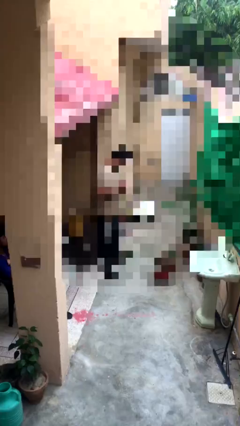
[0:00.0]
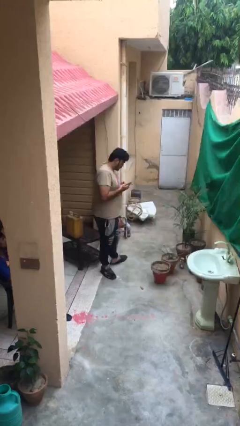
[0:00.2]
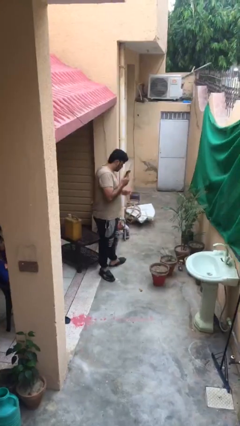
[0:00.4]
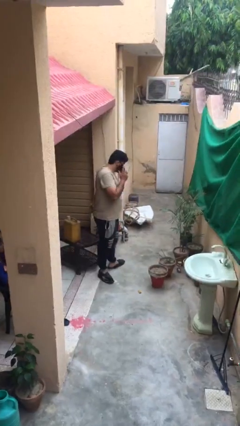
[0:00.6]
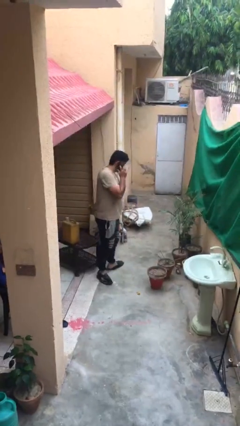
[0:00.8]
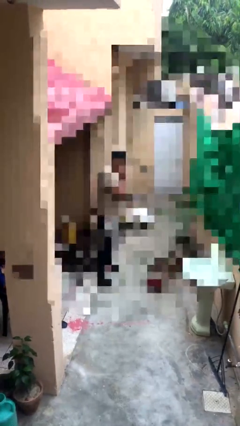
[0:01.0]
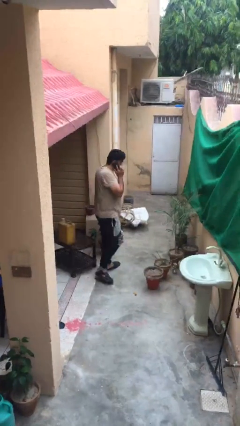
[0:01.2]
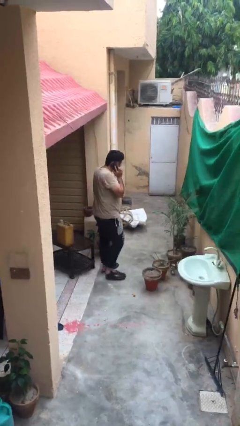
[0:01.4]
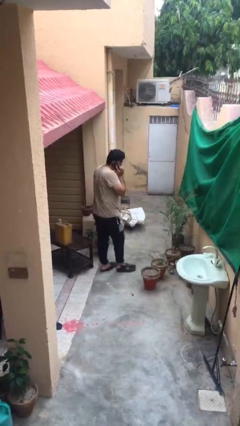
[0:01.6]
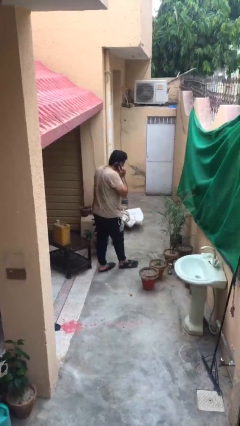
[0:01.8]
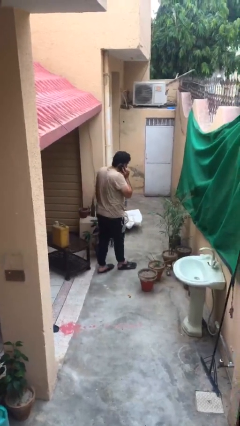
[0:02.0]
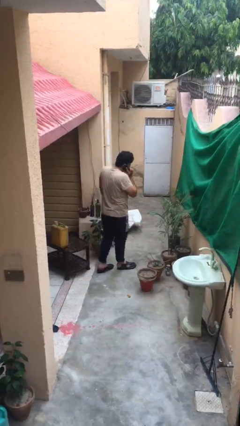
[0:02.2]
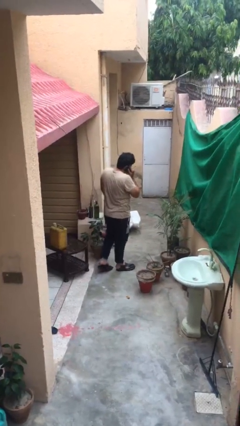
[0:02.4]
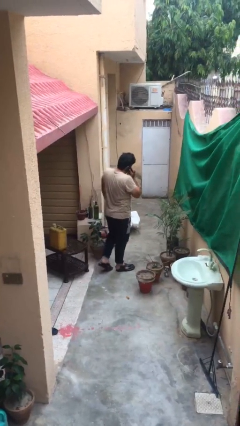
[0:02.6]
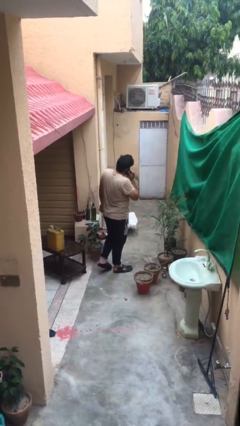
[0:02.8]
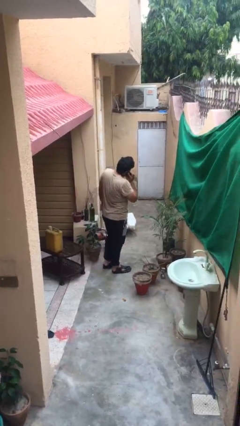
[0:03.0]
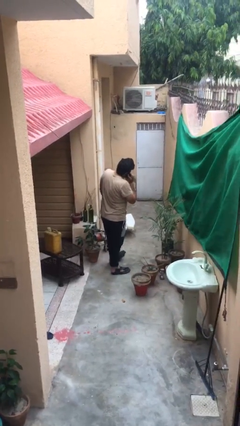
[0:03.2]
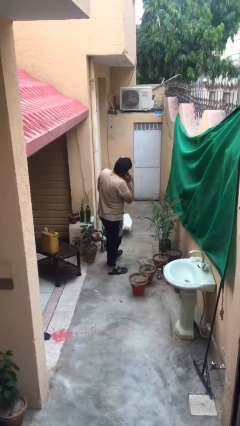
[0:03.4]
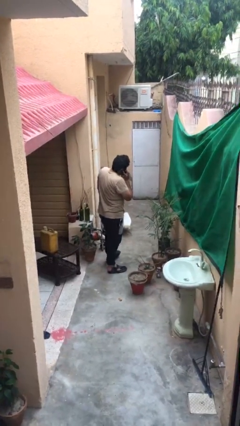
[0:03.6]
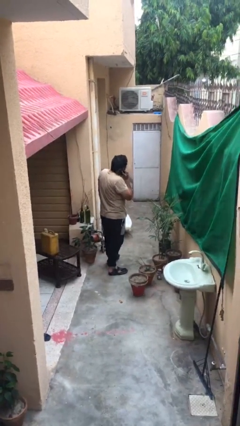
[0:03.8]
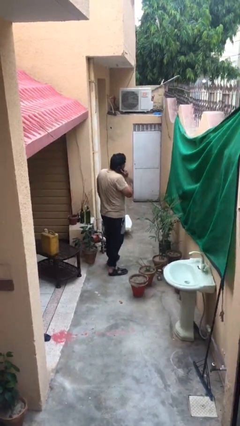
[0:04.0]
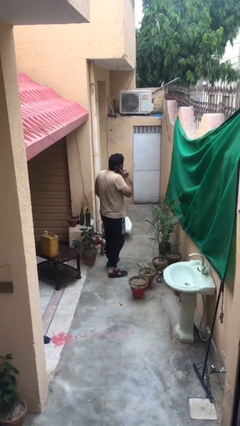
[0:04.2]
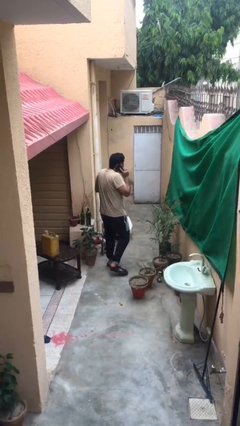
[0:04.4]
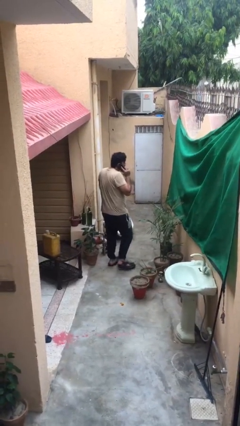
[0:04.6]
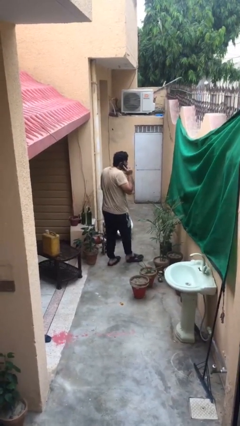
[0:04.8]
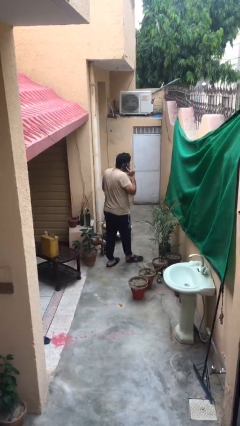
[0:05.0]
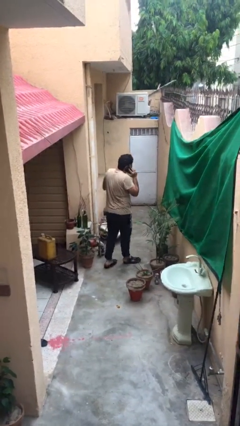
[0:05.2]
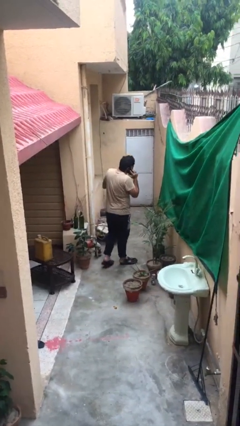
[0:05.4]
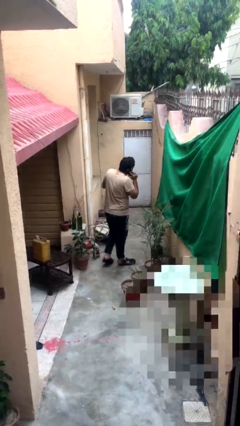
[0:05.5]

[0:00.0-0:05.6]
person talks on phone

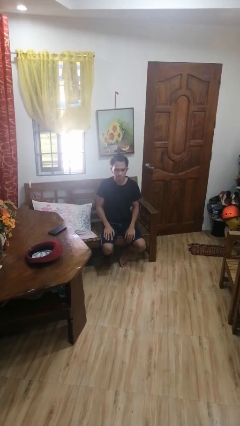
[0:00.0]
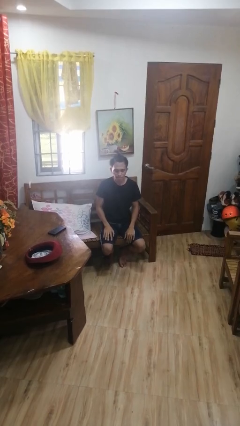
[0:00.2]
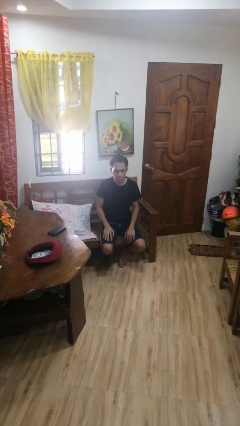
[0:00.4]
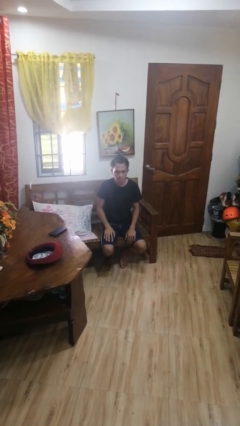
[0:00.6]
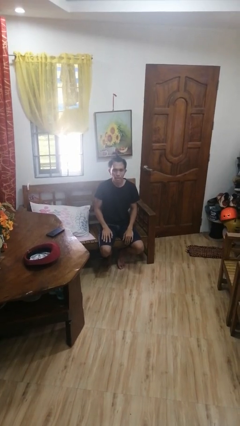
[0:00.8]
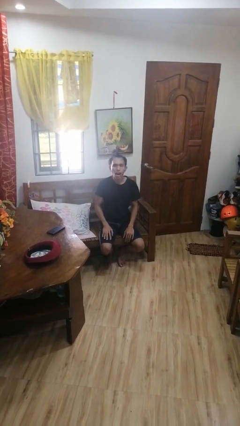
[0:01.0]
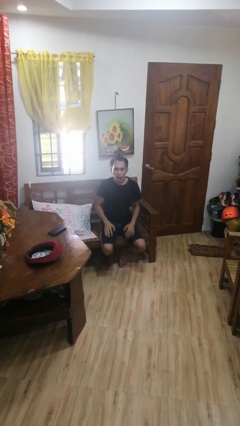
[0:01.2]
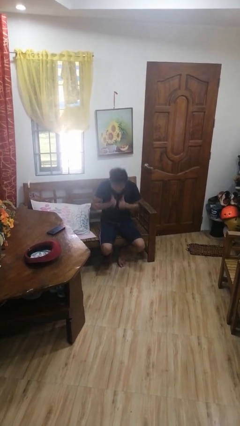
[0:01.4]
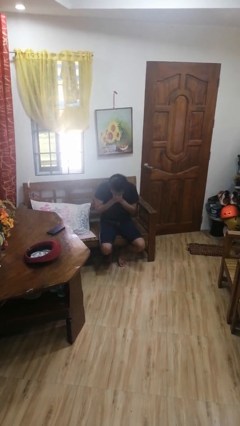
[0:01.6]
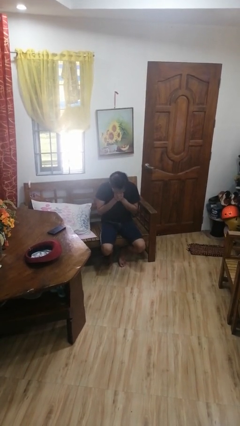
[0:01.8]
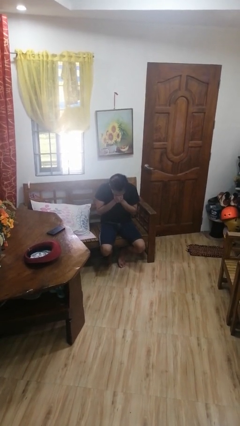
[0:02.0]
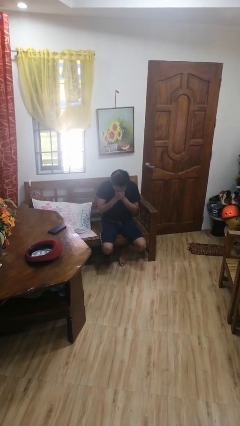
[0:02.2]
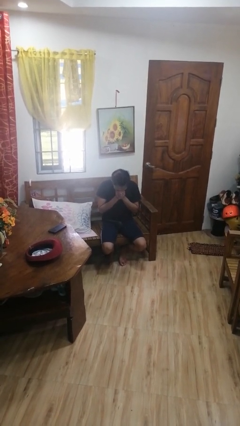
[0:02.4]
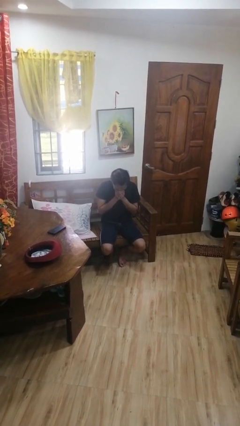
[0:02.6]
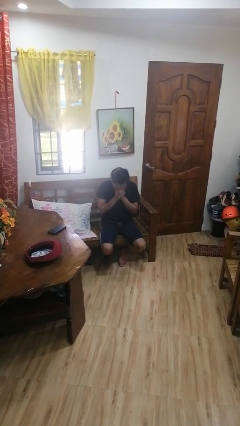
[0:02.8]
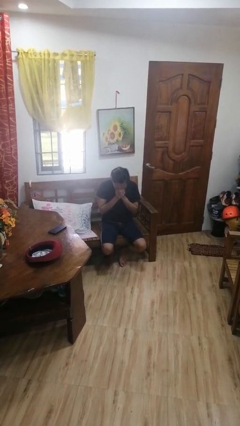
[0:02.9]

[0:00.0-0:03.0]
person sneezes into hand

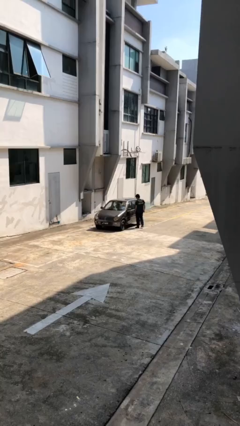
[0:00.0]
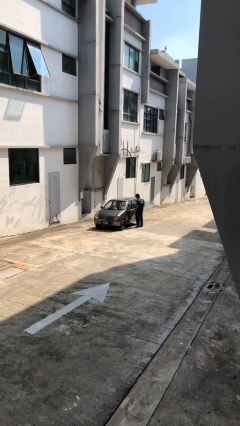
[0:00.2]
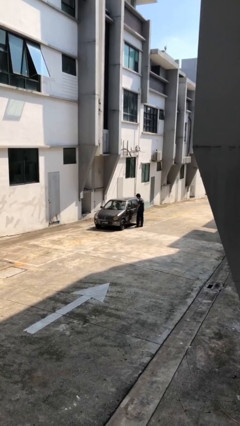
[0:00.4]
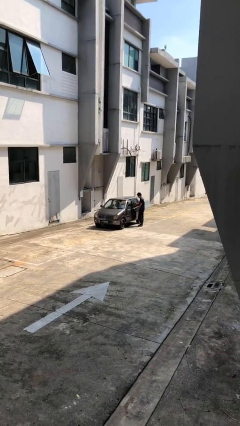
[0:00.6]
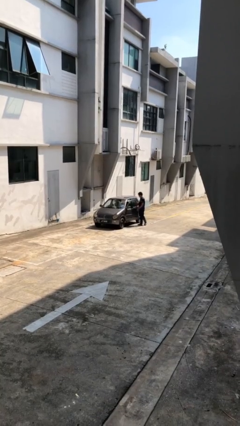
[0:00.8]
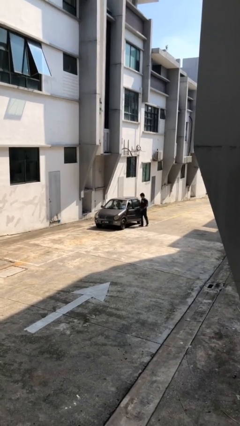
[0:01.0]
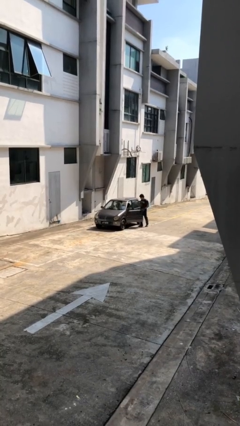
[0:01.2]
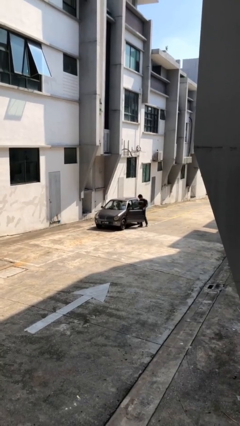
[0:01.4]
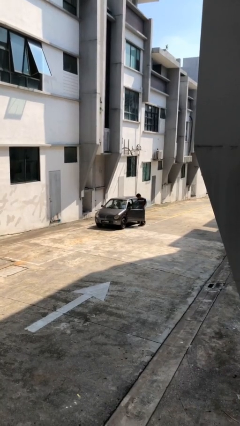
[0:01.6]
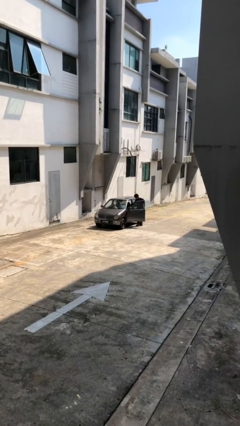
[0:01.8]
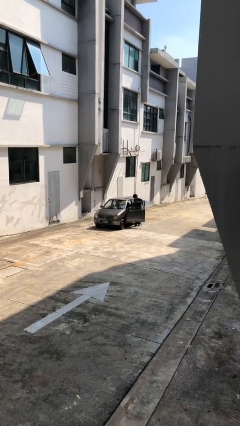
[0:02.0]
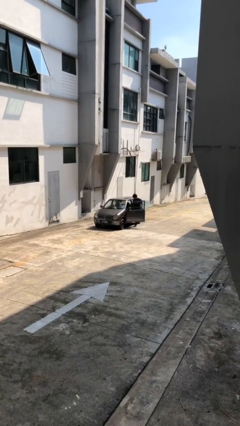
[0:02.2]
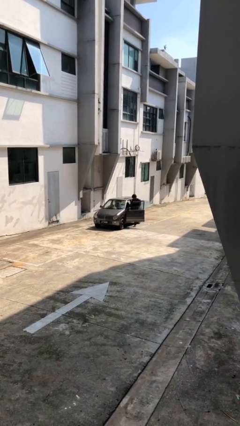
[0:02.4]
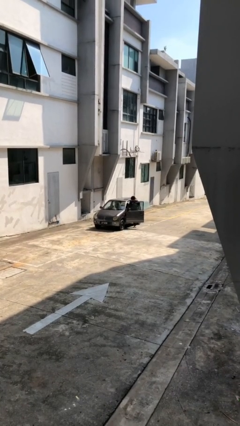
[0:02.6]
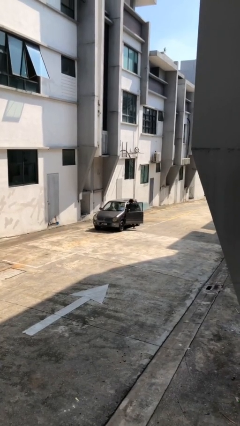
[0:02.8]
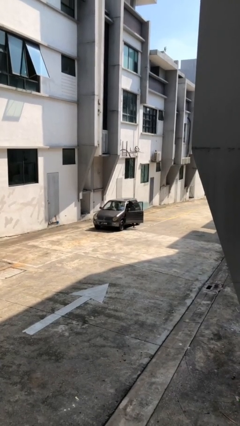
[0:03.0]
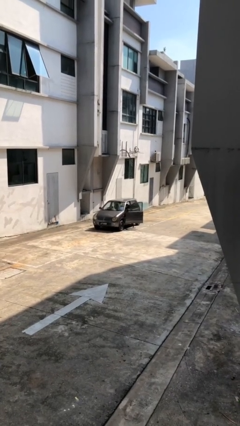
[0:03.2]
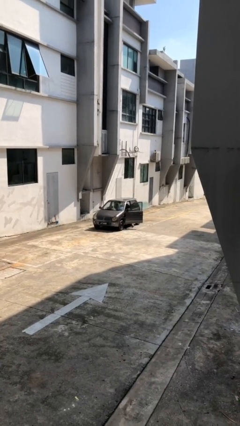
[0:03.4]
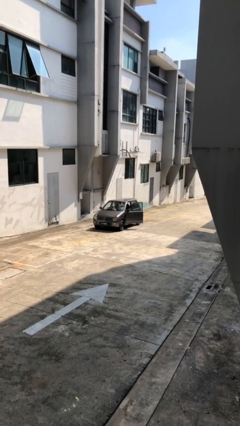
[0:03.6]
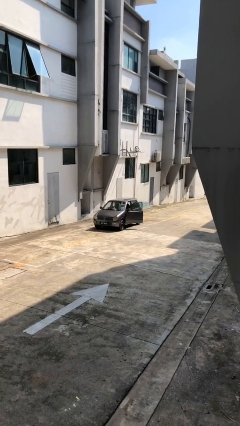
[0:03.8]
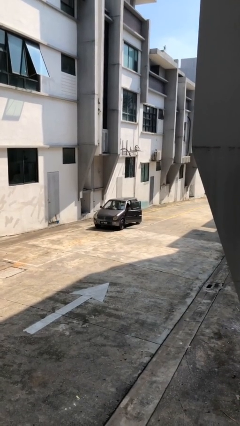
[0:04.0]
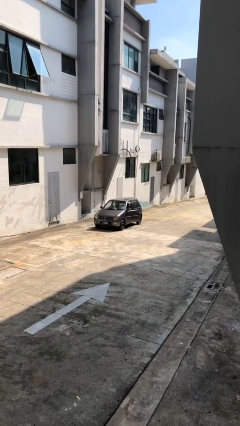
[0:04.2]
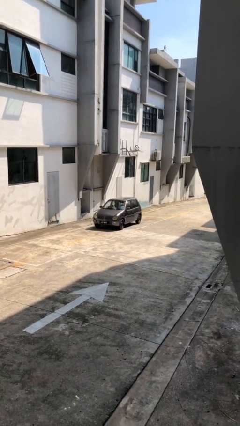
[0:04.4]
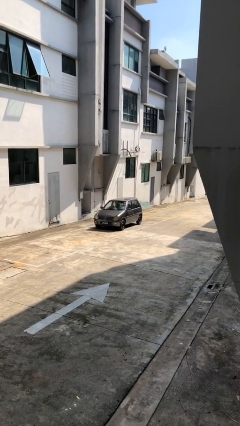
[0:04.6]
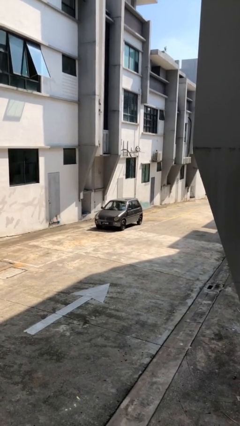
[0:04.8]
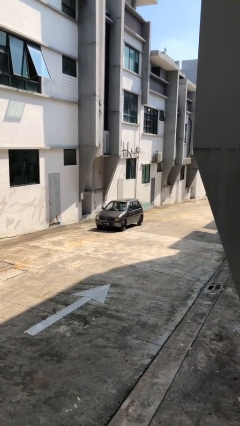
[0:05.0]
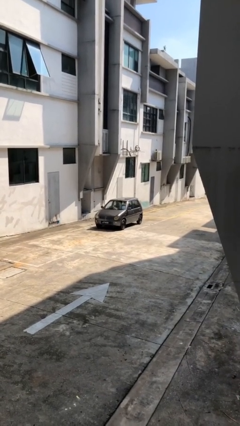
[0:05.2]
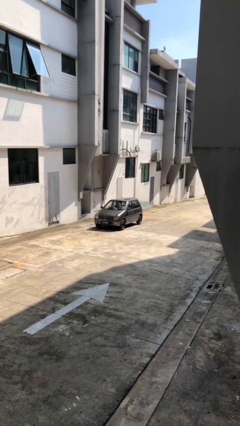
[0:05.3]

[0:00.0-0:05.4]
car picks up person

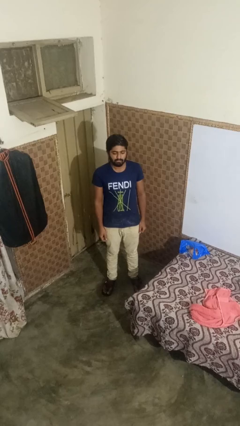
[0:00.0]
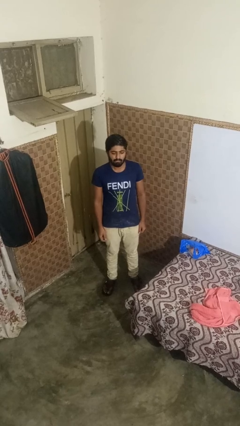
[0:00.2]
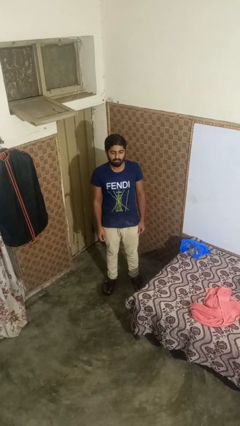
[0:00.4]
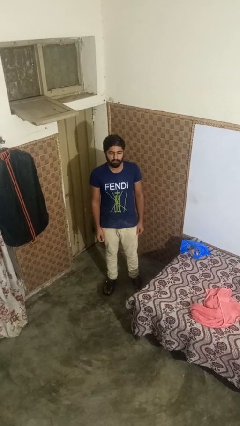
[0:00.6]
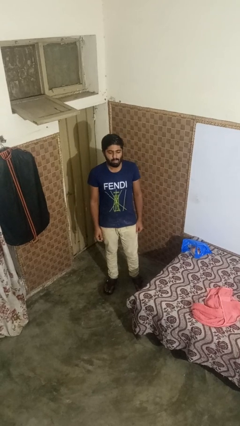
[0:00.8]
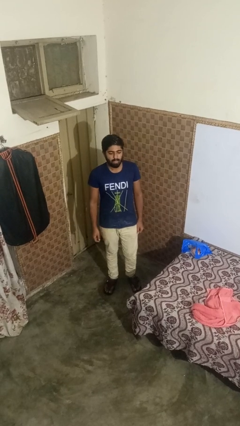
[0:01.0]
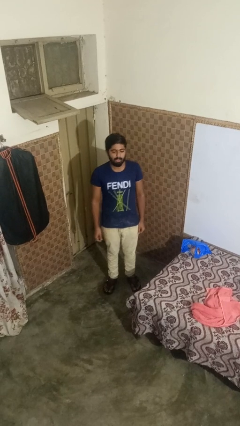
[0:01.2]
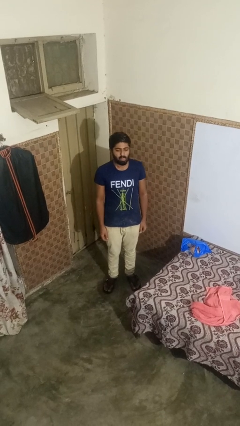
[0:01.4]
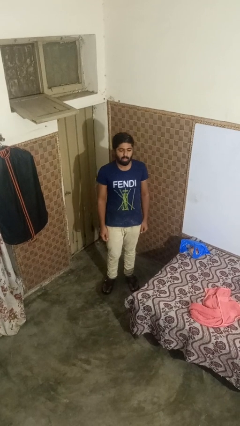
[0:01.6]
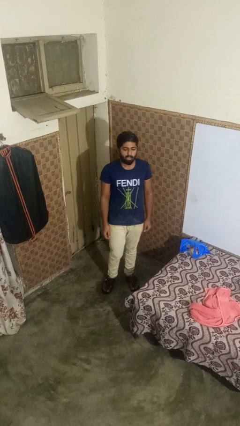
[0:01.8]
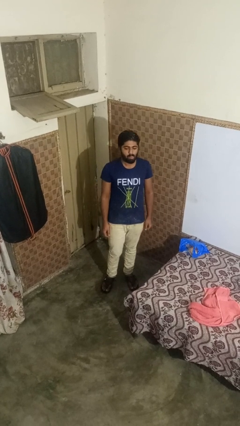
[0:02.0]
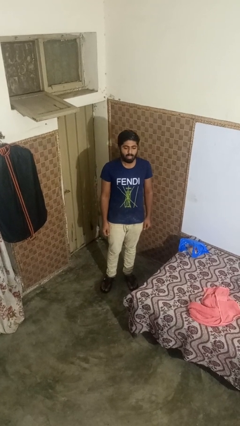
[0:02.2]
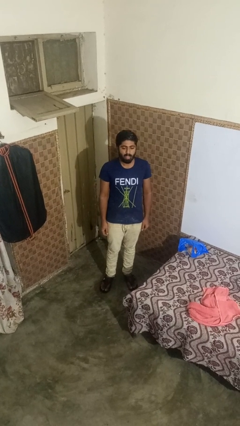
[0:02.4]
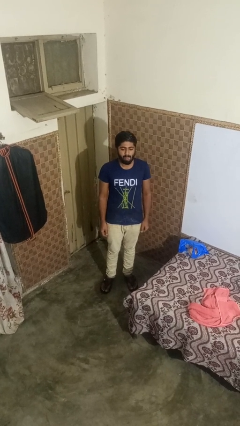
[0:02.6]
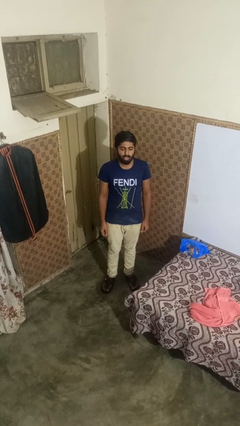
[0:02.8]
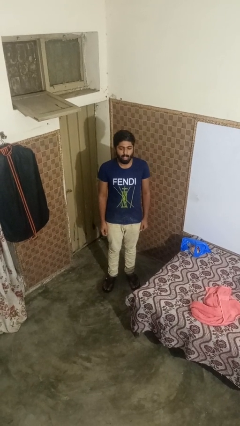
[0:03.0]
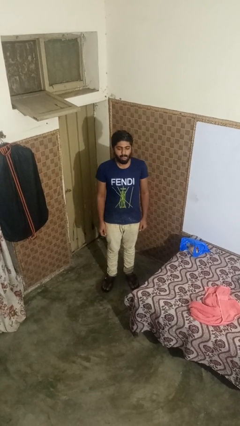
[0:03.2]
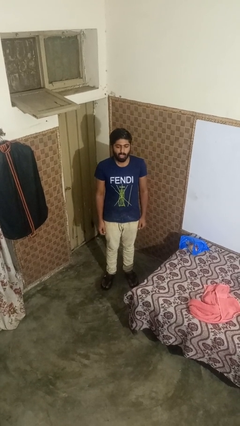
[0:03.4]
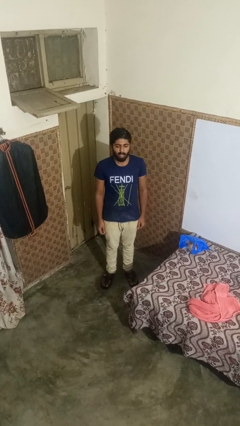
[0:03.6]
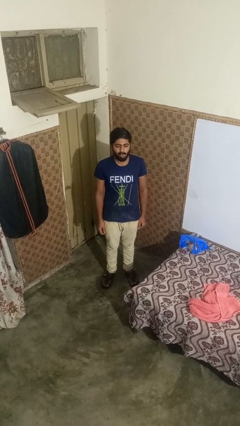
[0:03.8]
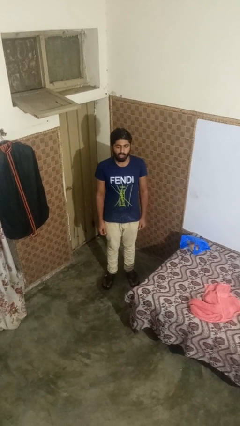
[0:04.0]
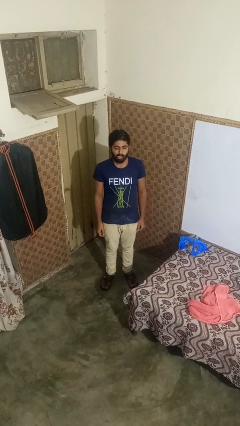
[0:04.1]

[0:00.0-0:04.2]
person sticks out tongue
